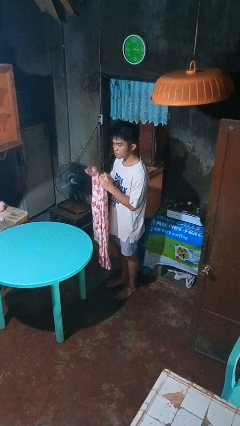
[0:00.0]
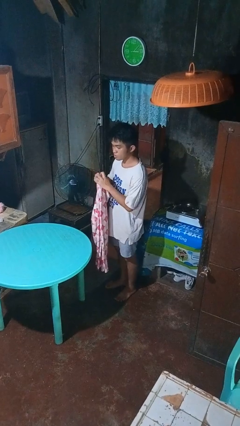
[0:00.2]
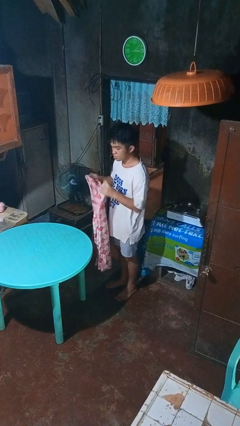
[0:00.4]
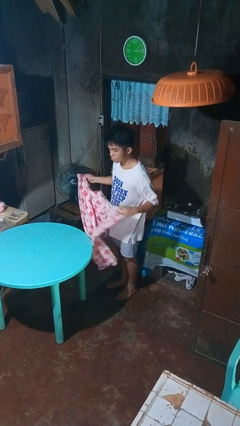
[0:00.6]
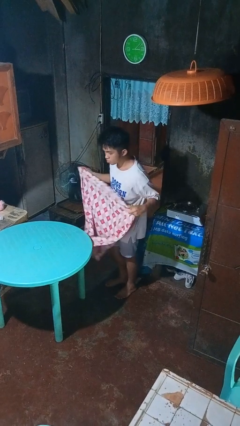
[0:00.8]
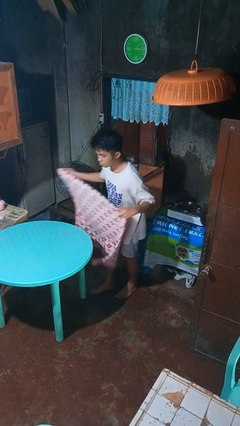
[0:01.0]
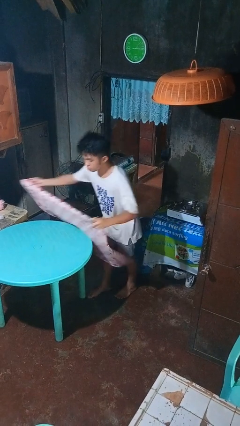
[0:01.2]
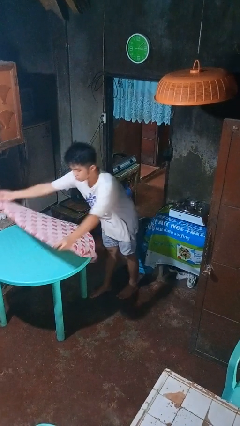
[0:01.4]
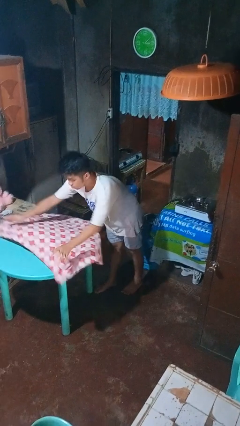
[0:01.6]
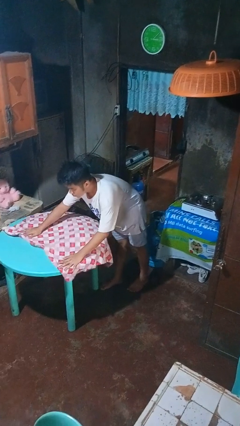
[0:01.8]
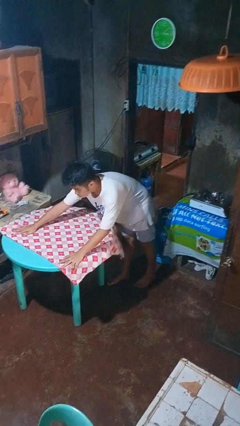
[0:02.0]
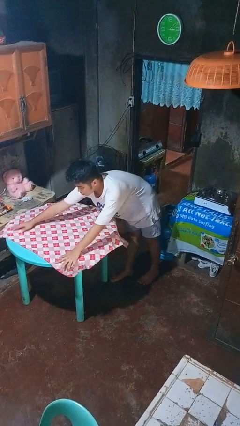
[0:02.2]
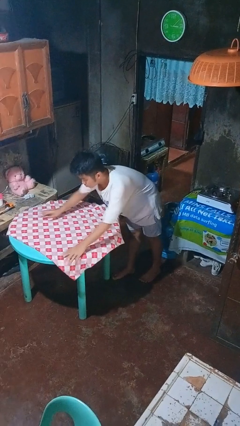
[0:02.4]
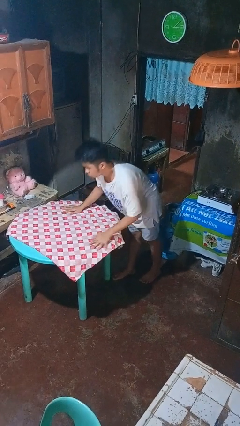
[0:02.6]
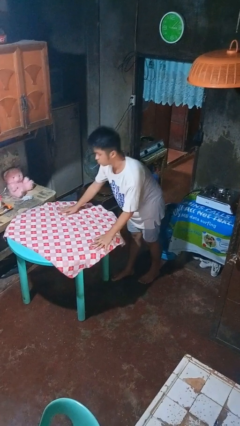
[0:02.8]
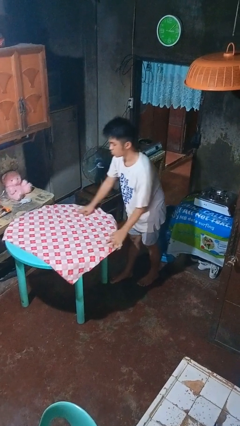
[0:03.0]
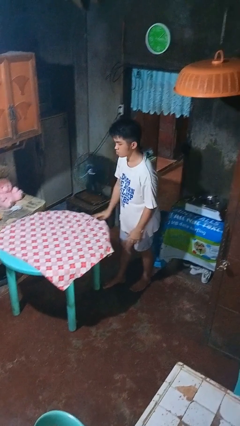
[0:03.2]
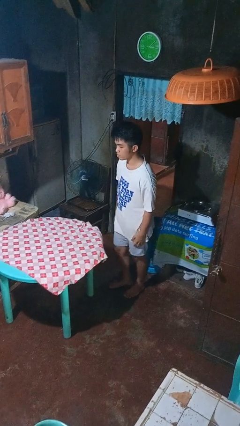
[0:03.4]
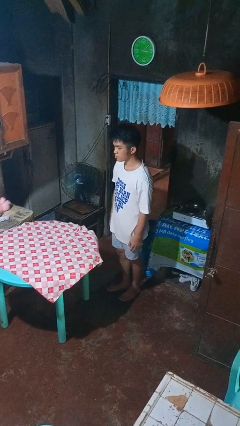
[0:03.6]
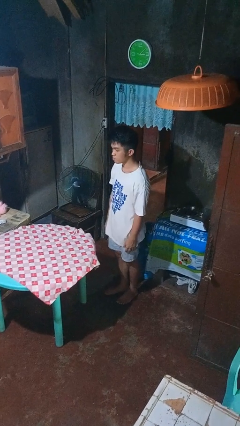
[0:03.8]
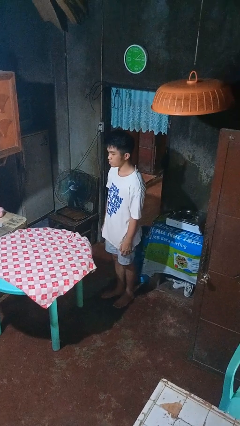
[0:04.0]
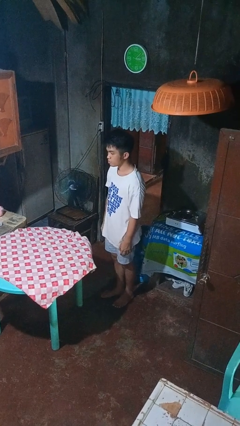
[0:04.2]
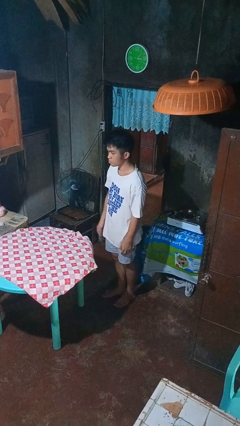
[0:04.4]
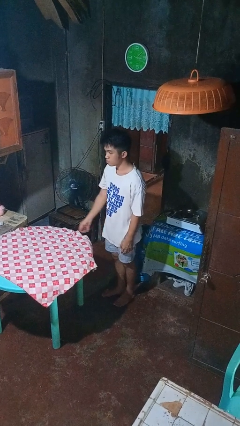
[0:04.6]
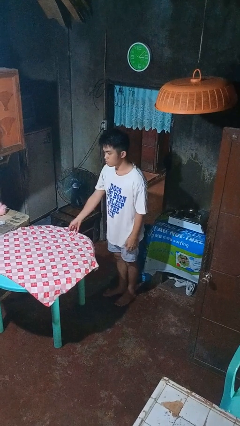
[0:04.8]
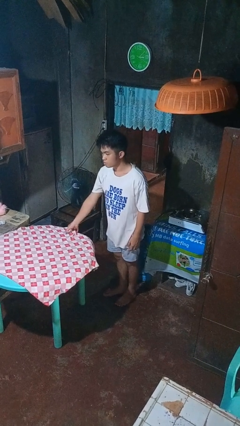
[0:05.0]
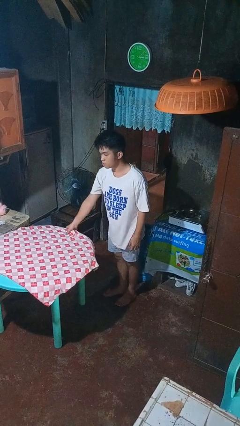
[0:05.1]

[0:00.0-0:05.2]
person spreads tablecloth

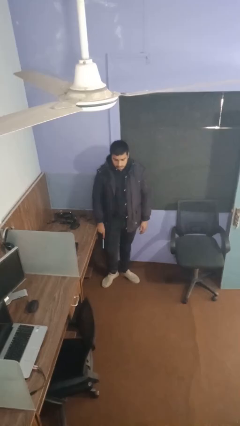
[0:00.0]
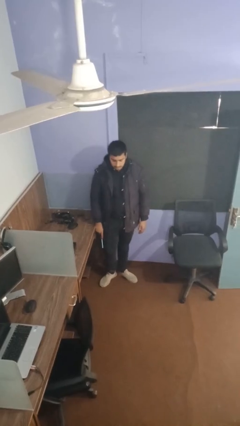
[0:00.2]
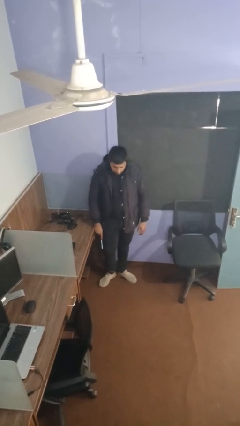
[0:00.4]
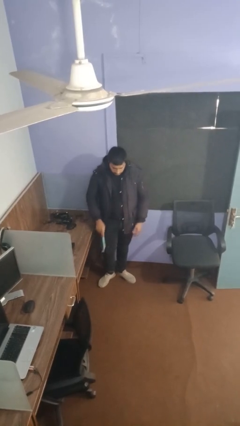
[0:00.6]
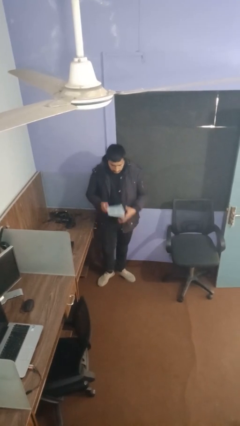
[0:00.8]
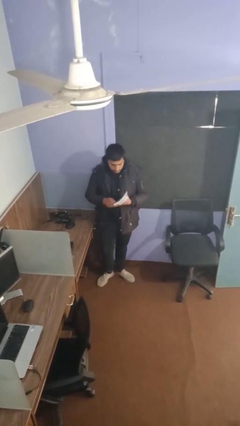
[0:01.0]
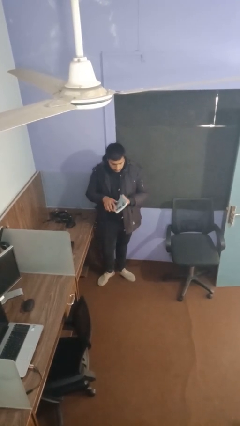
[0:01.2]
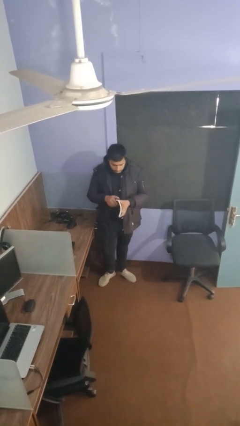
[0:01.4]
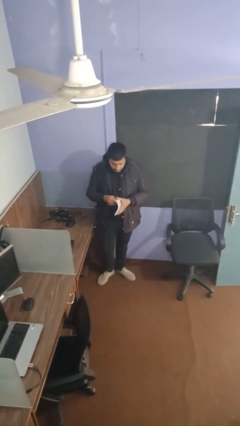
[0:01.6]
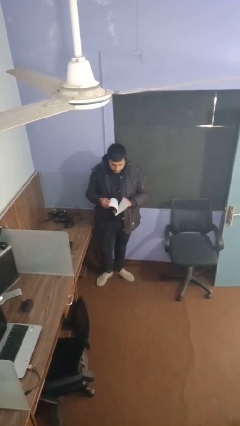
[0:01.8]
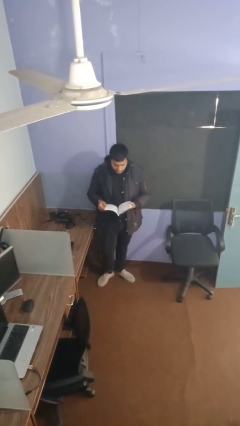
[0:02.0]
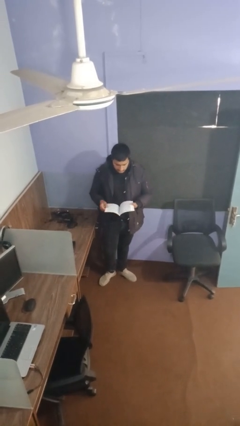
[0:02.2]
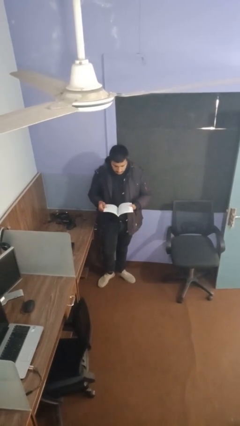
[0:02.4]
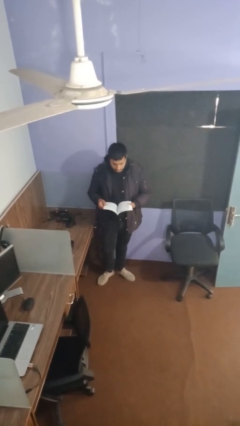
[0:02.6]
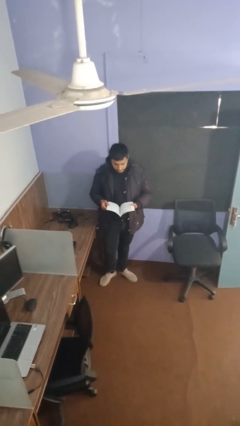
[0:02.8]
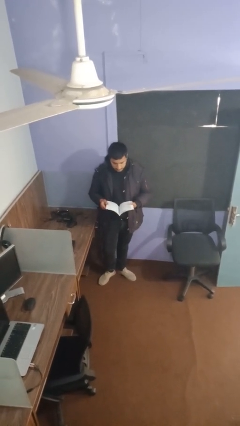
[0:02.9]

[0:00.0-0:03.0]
person reads document

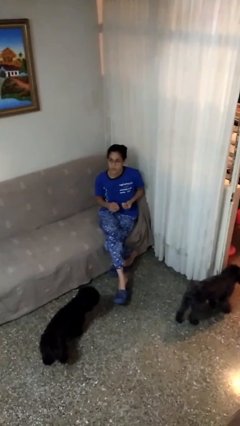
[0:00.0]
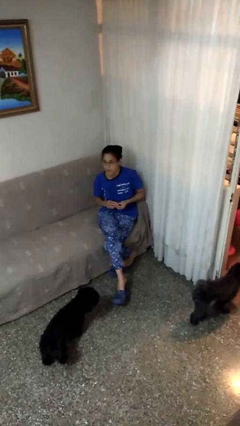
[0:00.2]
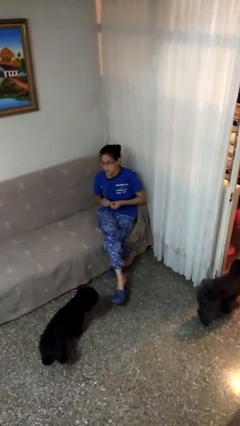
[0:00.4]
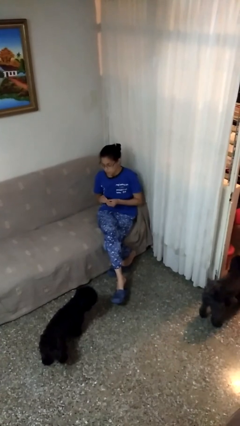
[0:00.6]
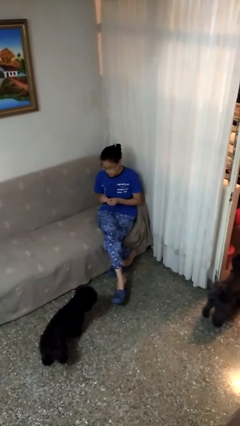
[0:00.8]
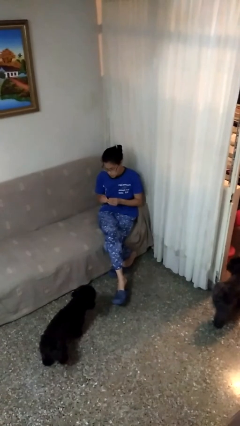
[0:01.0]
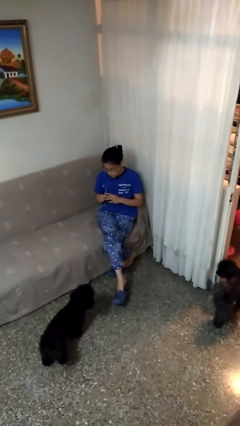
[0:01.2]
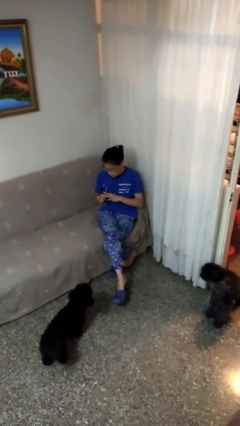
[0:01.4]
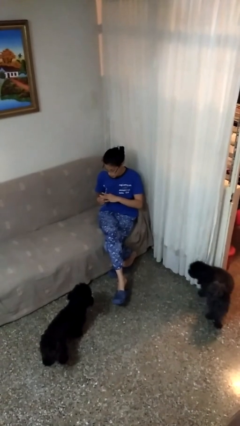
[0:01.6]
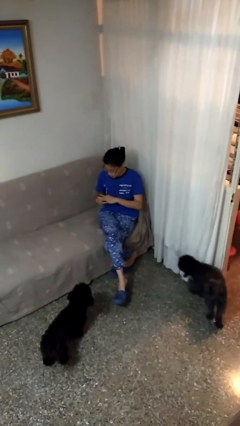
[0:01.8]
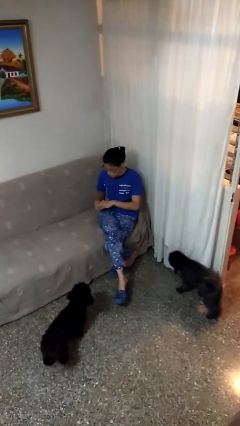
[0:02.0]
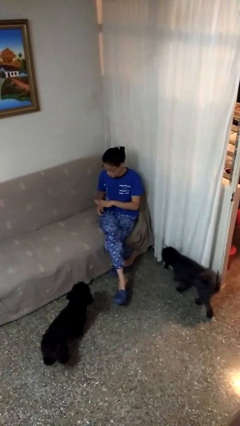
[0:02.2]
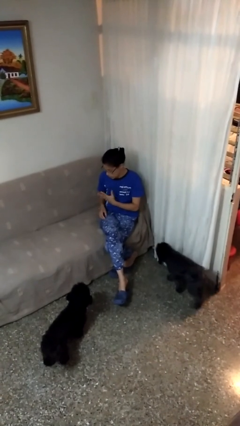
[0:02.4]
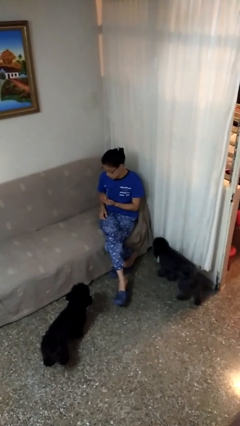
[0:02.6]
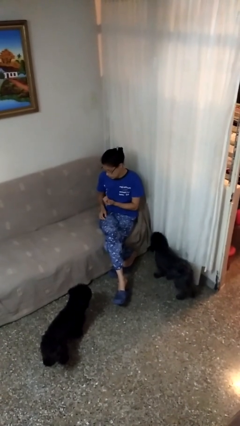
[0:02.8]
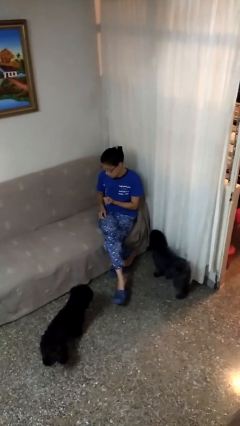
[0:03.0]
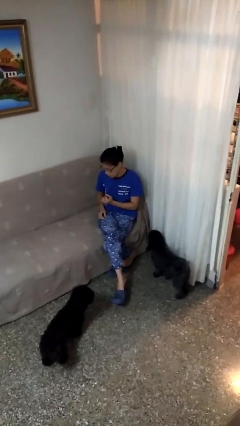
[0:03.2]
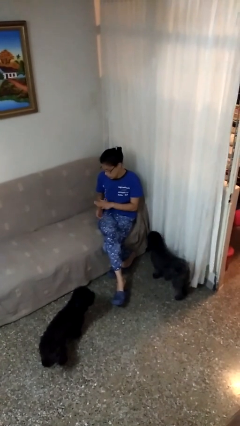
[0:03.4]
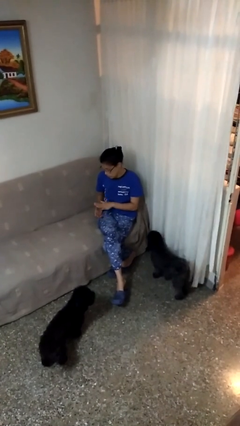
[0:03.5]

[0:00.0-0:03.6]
person puts on ring

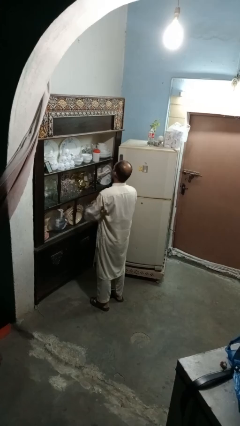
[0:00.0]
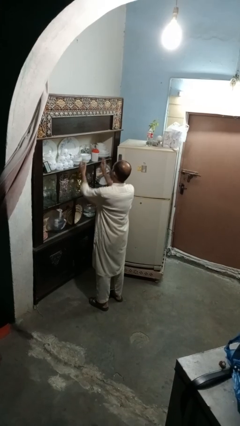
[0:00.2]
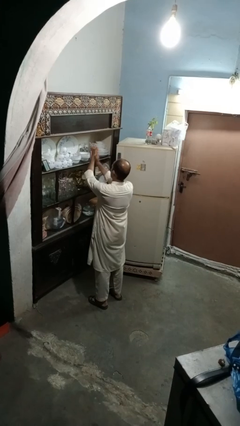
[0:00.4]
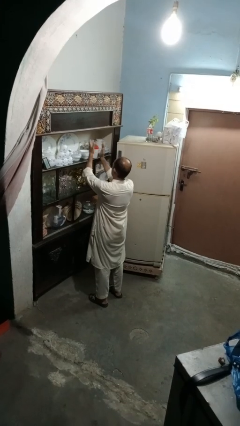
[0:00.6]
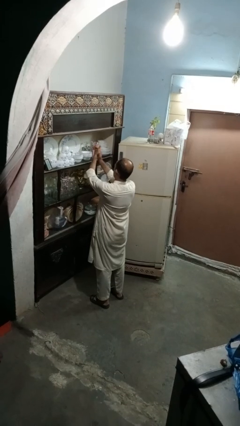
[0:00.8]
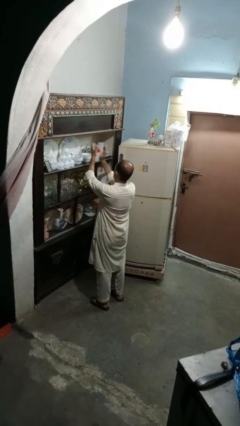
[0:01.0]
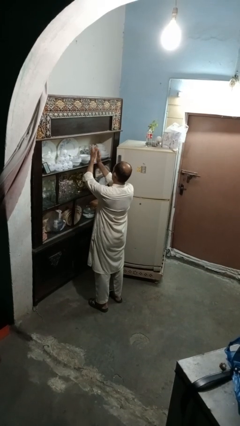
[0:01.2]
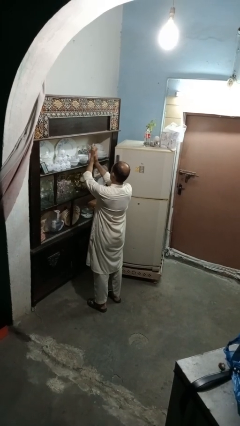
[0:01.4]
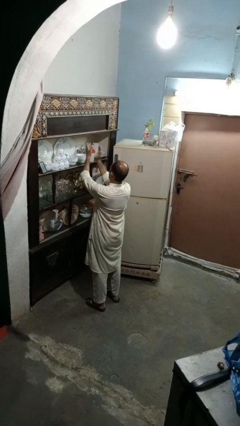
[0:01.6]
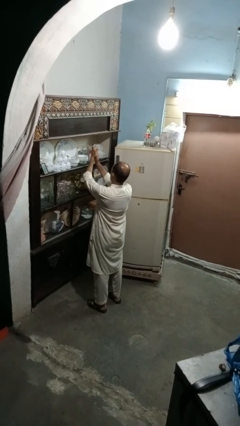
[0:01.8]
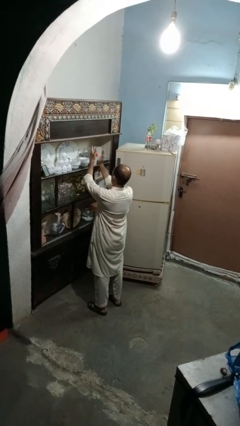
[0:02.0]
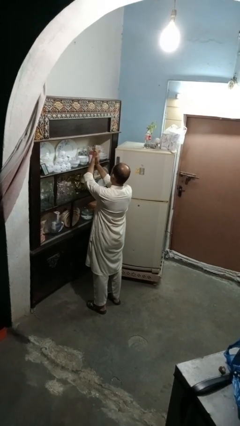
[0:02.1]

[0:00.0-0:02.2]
person claps hands

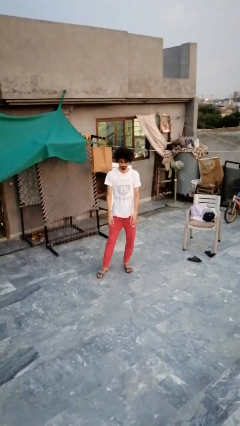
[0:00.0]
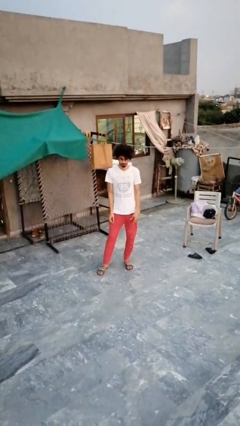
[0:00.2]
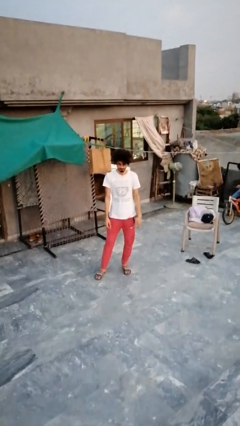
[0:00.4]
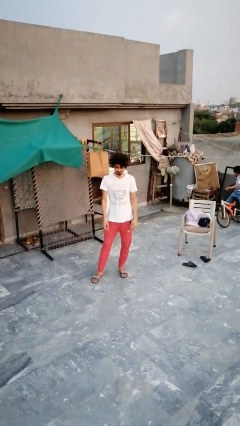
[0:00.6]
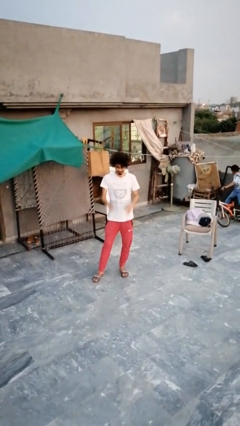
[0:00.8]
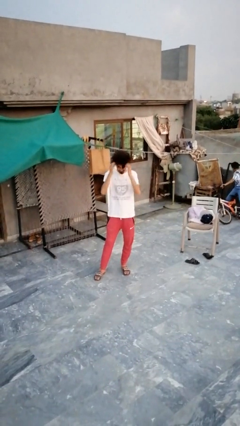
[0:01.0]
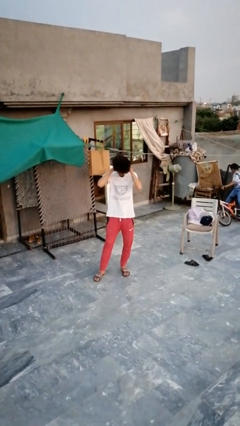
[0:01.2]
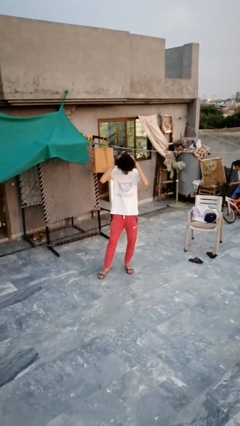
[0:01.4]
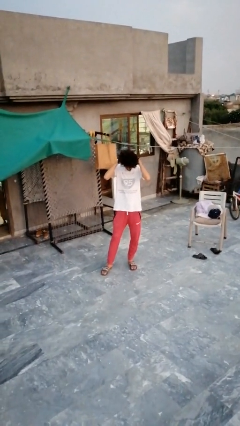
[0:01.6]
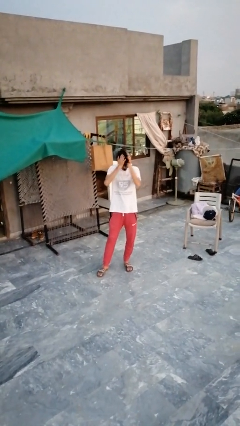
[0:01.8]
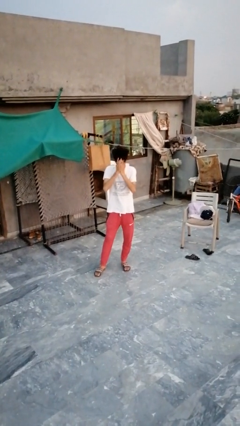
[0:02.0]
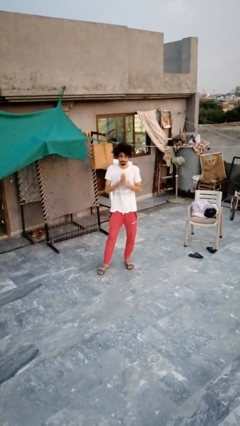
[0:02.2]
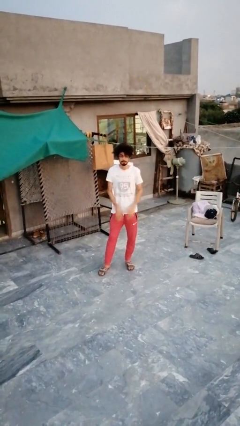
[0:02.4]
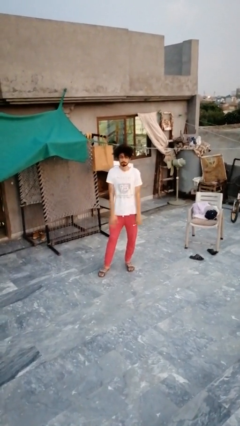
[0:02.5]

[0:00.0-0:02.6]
person strokes hair

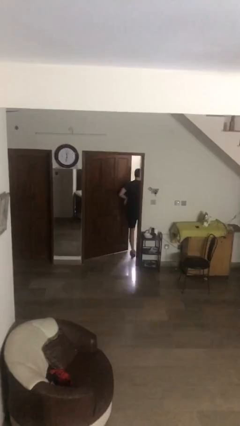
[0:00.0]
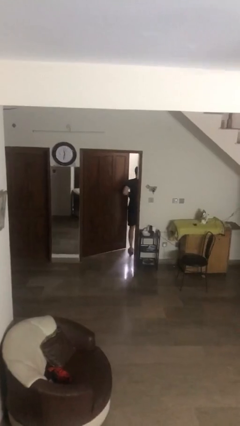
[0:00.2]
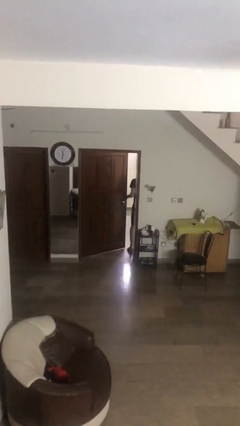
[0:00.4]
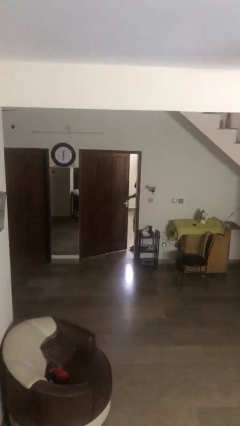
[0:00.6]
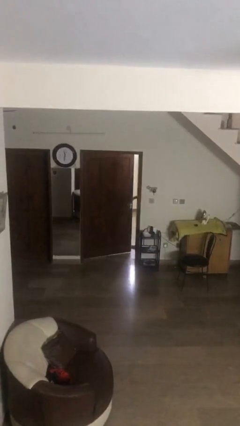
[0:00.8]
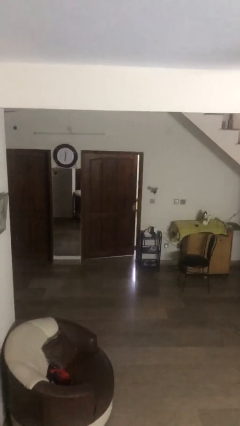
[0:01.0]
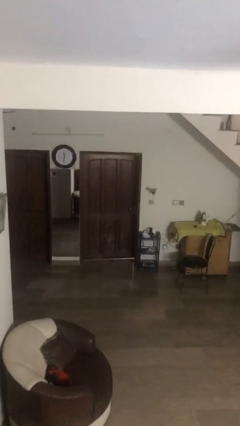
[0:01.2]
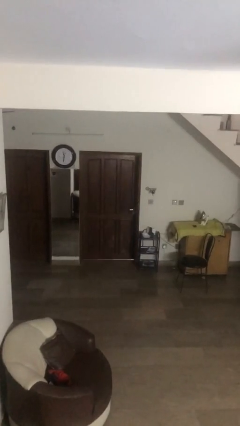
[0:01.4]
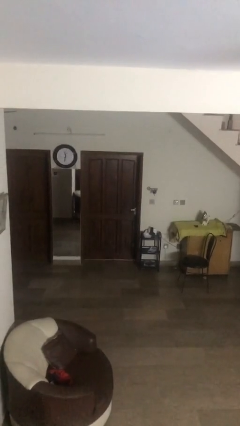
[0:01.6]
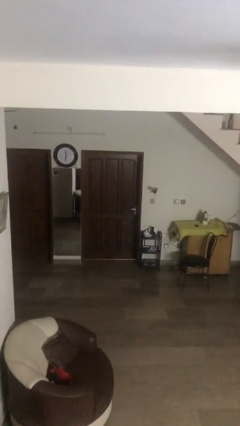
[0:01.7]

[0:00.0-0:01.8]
person closes facility door
